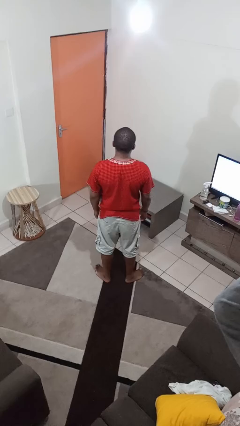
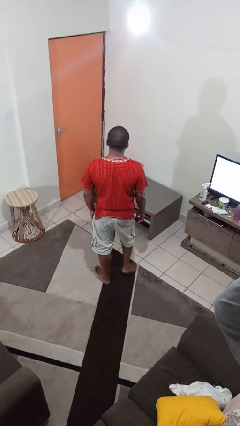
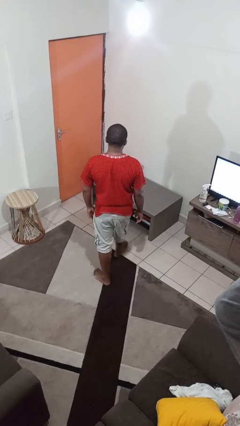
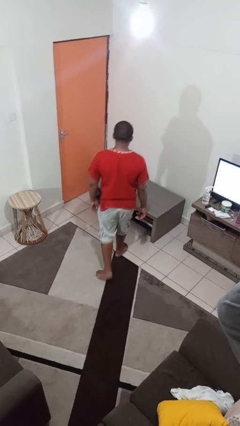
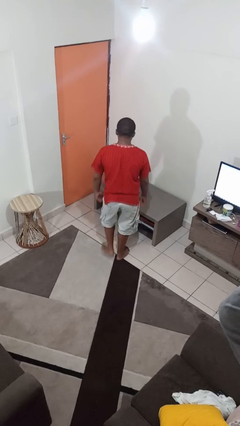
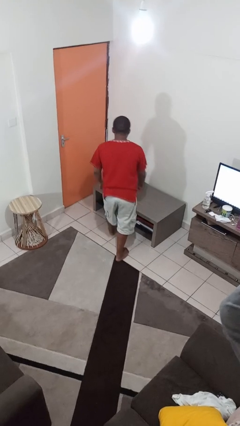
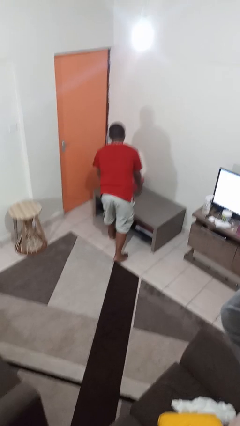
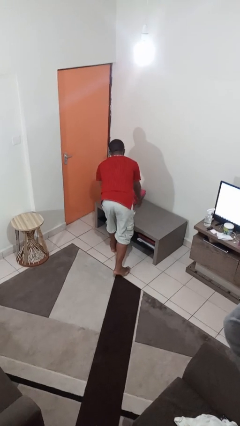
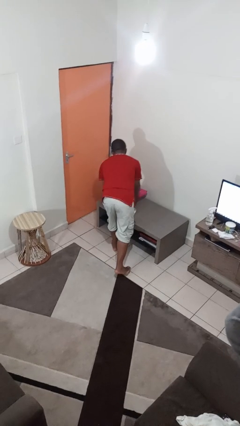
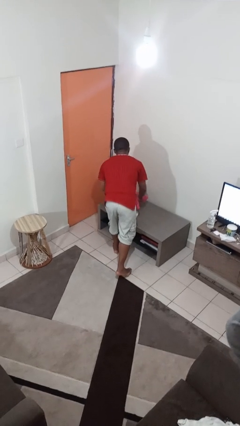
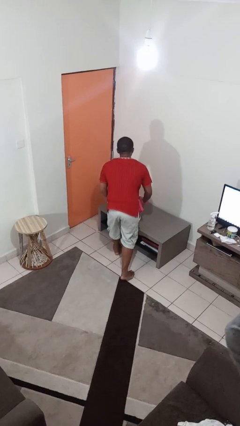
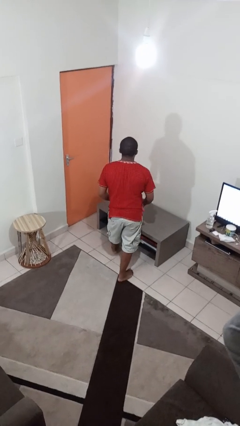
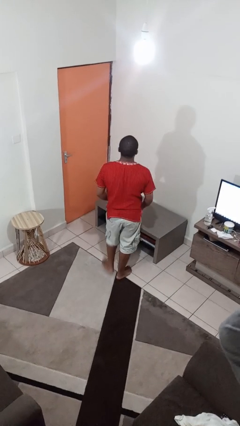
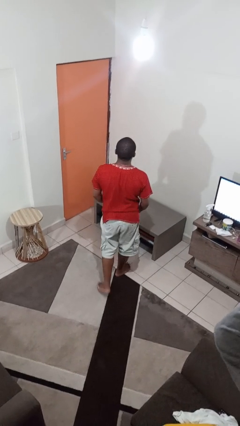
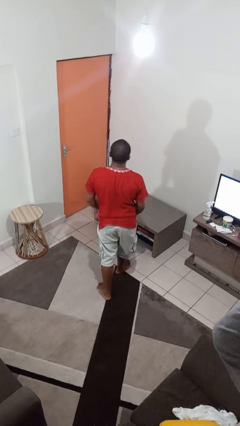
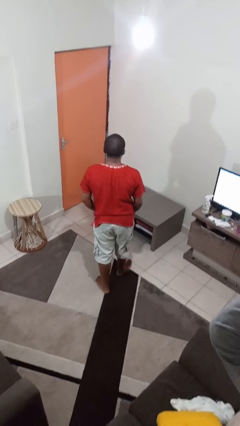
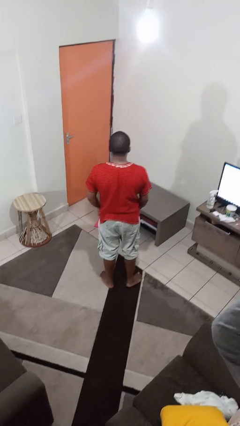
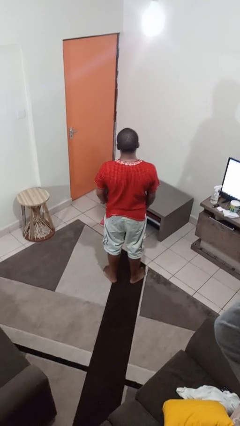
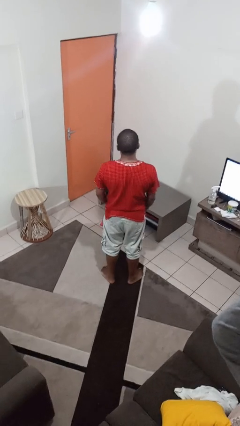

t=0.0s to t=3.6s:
person picks up object from table

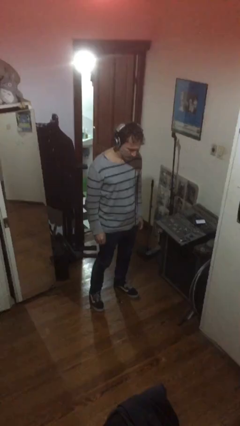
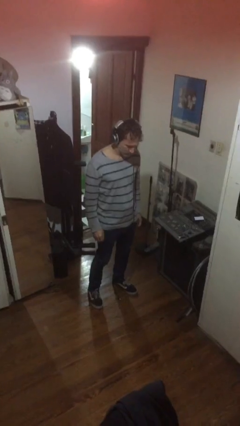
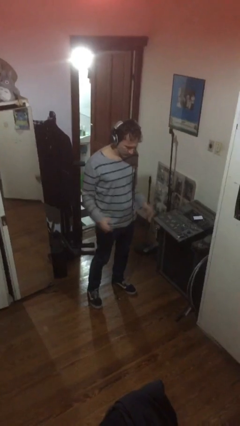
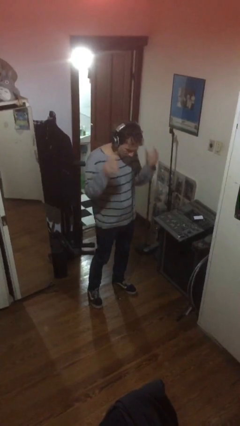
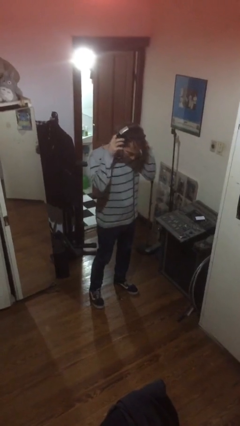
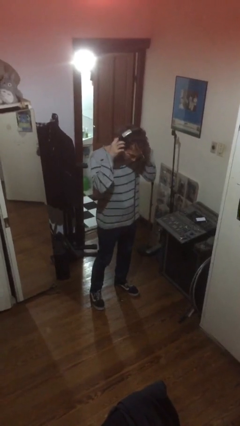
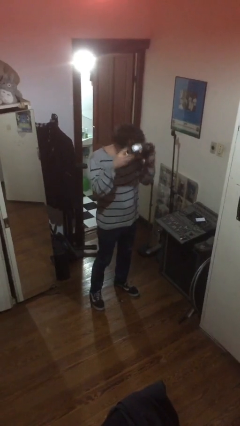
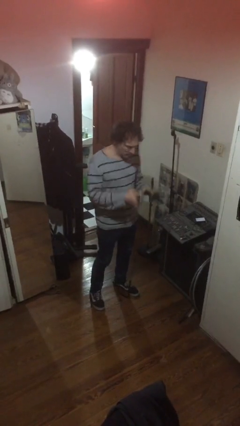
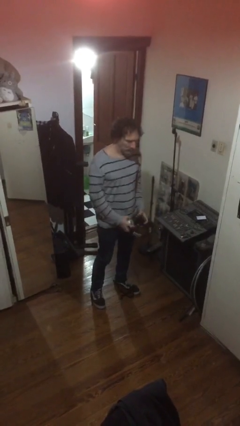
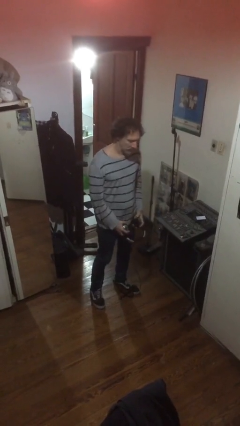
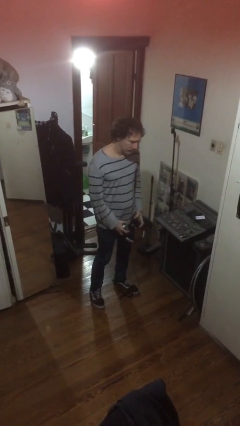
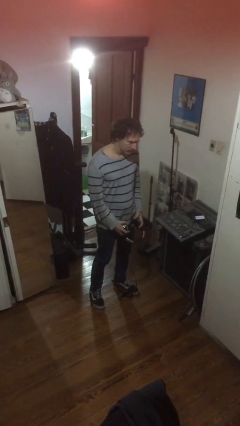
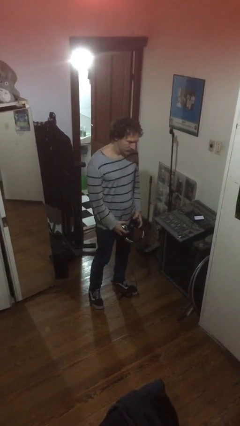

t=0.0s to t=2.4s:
person takes off headphones

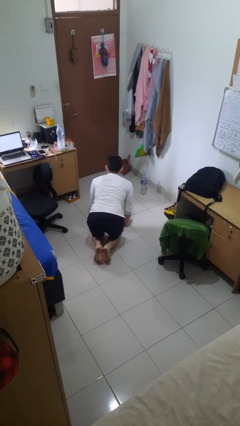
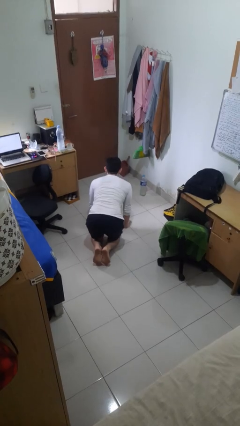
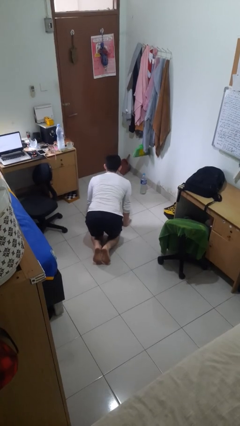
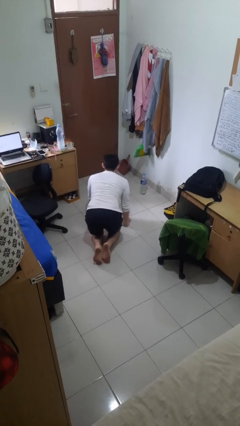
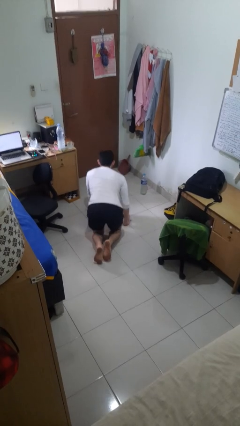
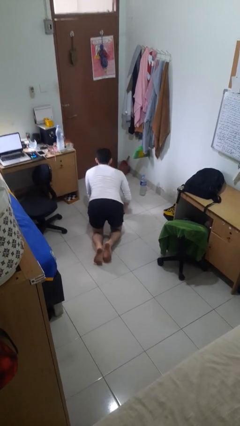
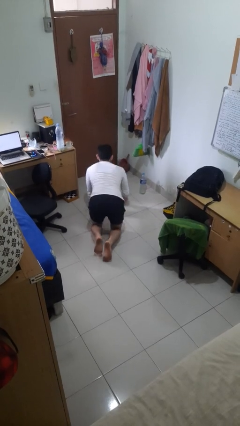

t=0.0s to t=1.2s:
person crawls

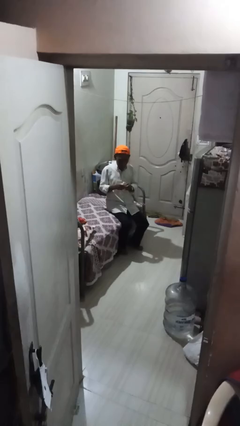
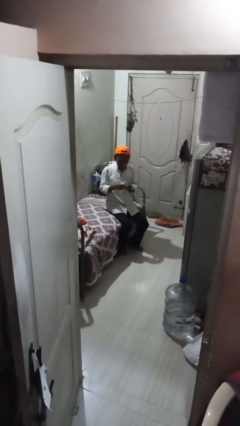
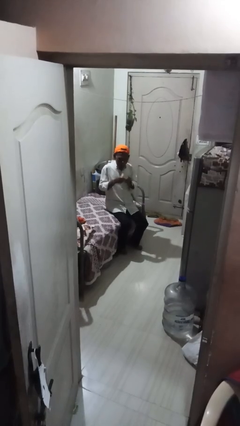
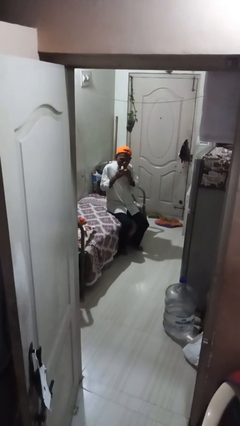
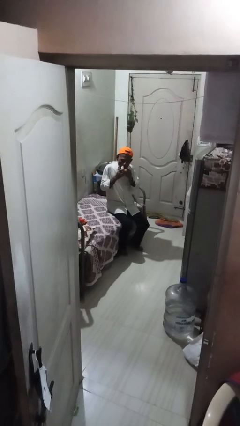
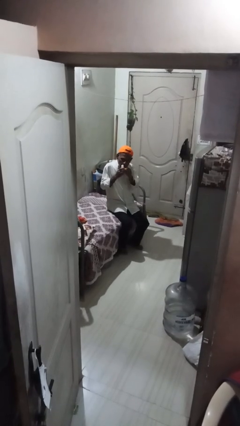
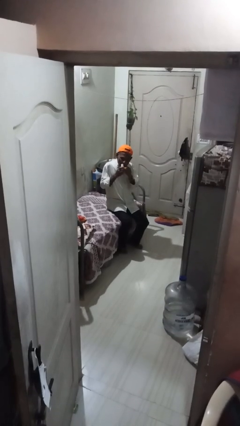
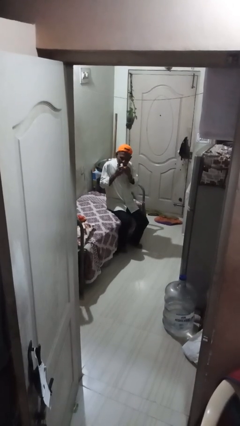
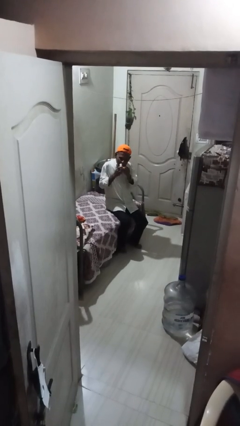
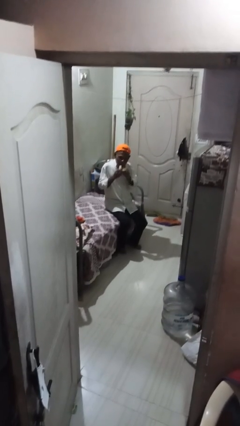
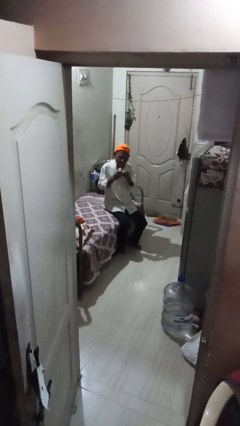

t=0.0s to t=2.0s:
person eats banana

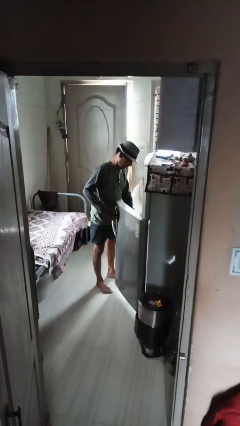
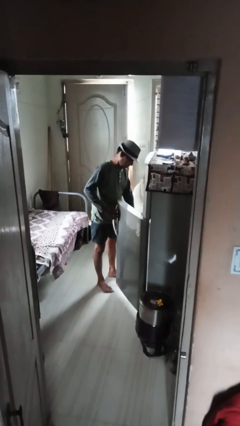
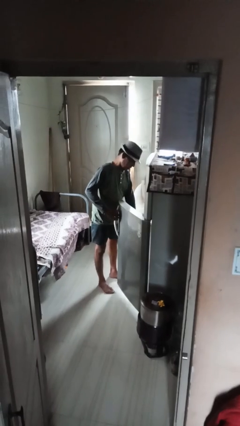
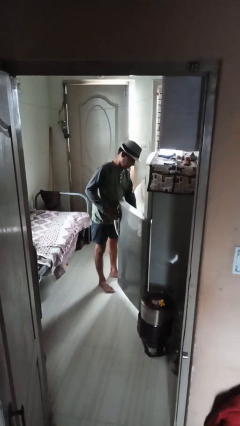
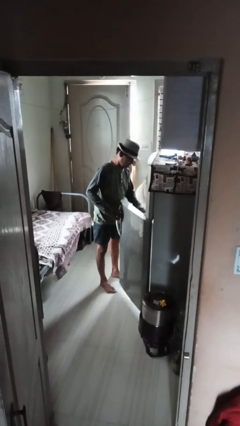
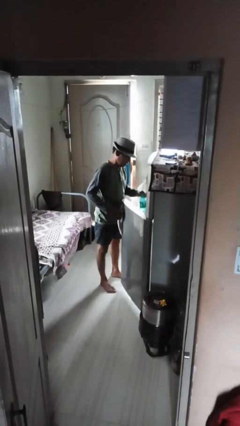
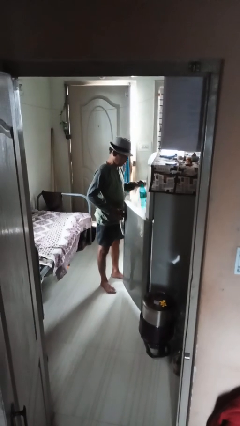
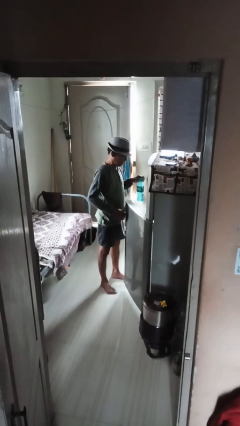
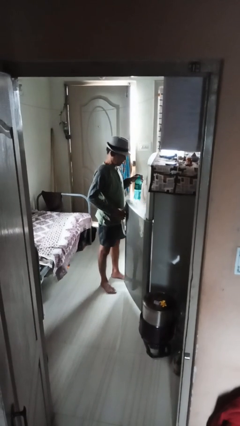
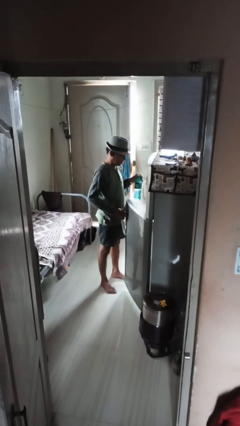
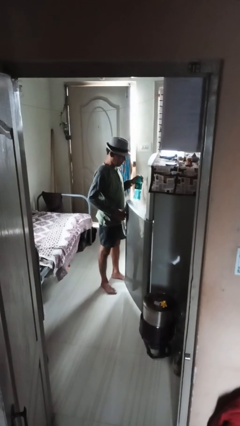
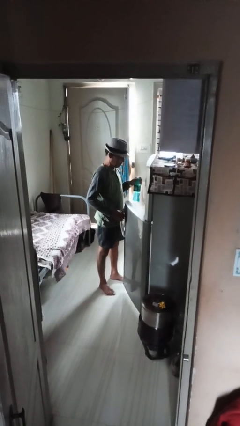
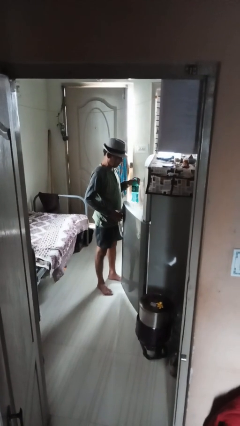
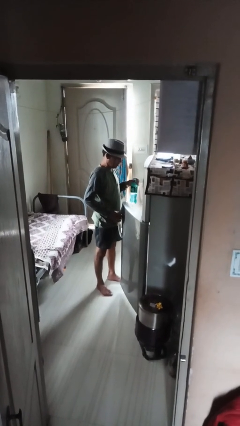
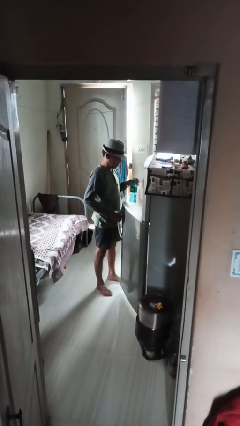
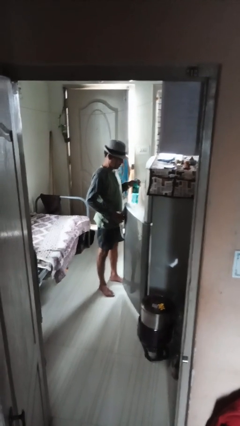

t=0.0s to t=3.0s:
person takes object from refrigerator

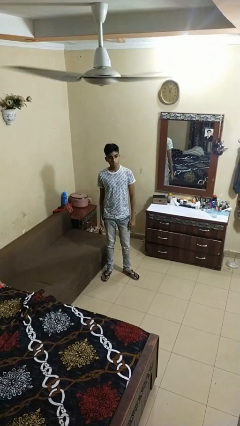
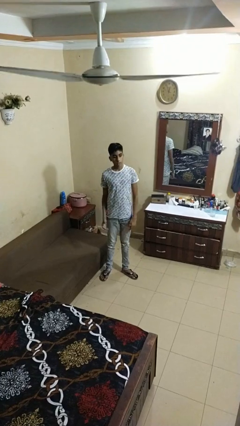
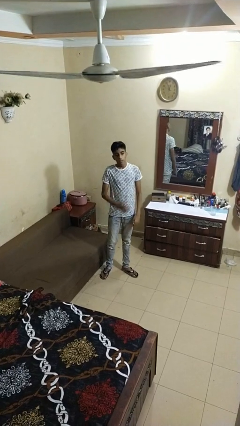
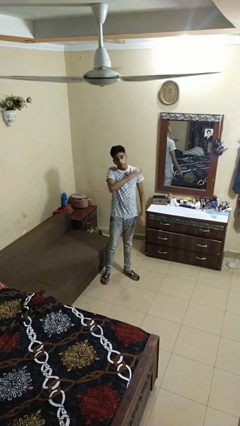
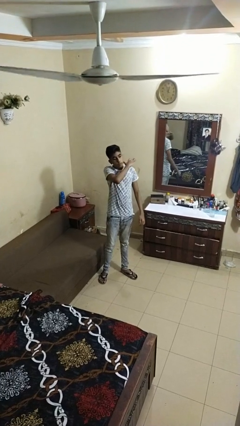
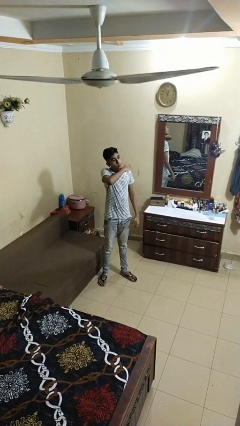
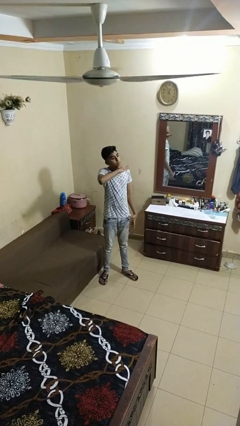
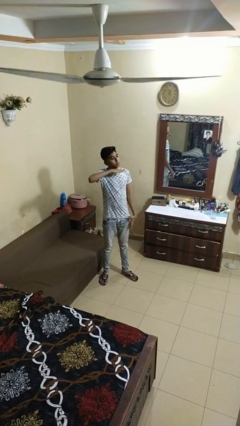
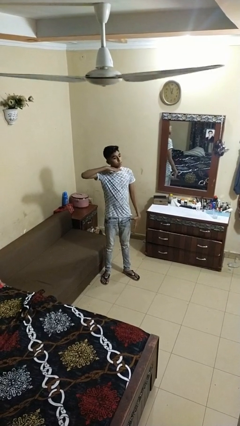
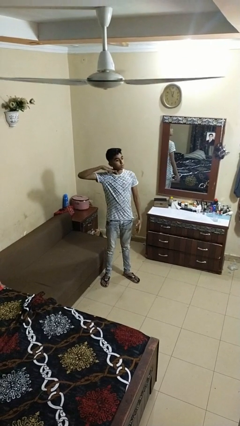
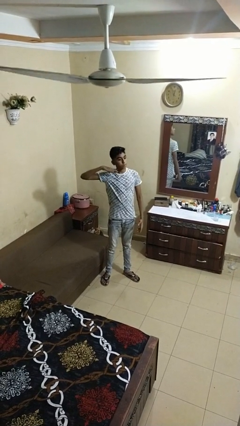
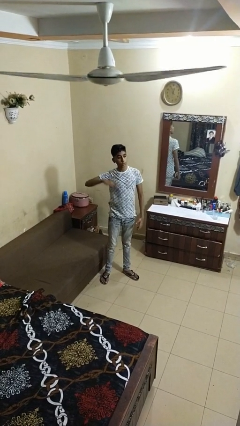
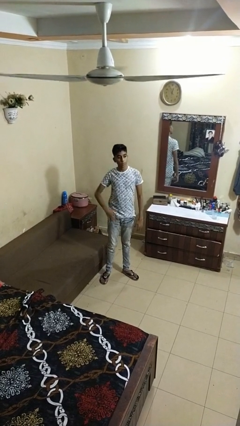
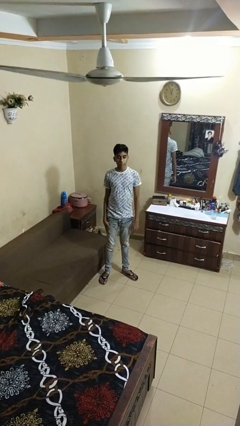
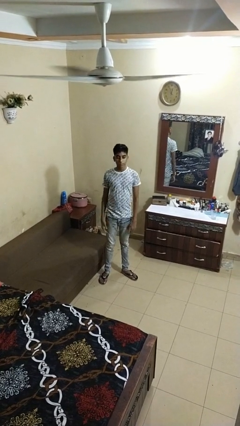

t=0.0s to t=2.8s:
person gestures cut

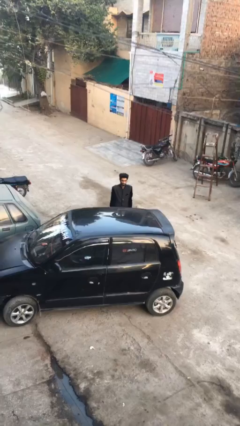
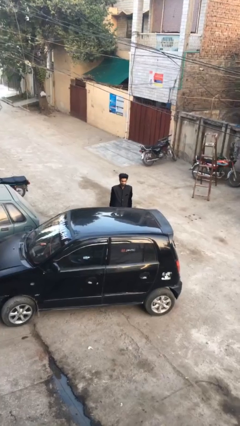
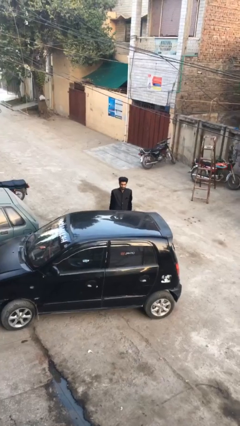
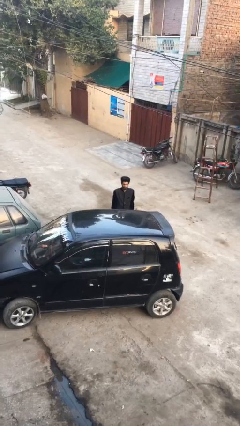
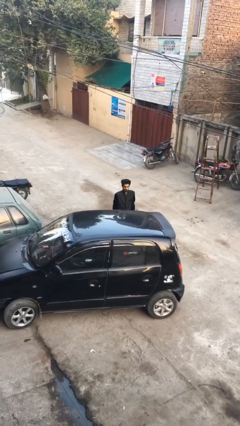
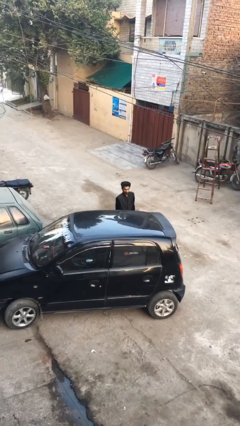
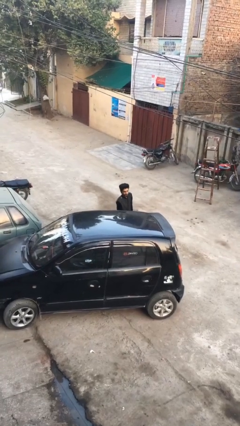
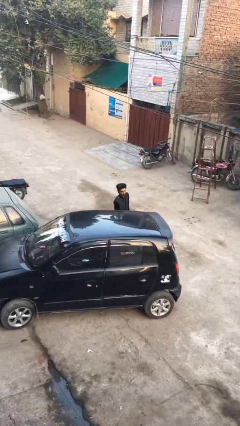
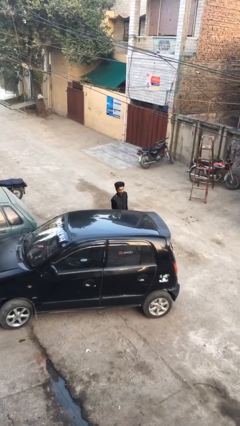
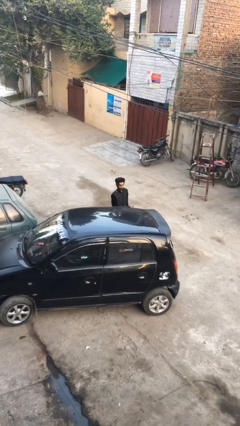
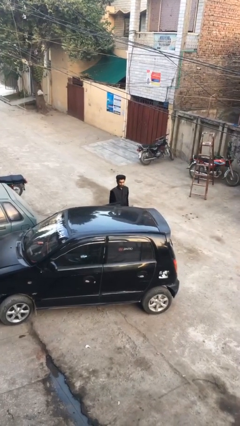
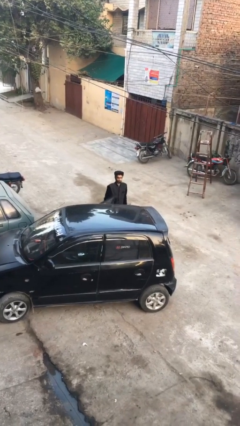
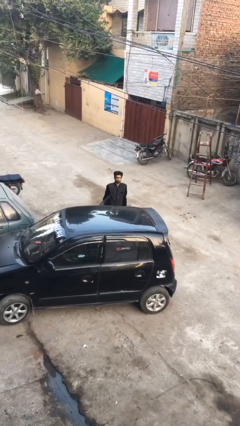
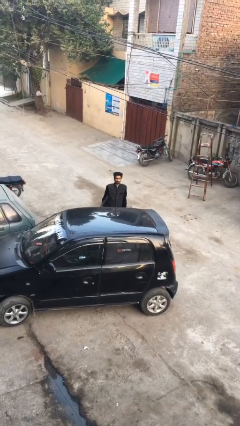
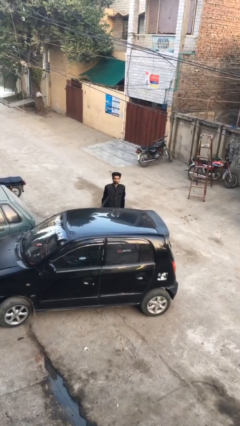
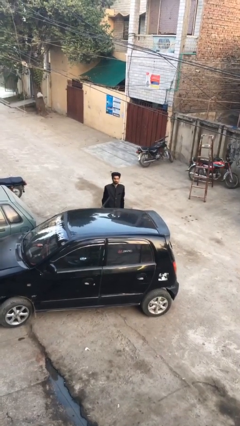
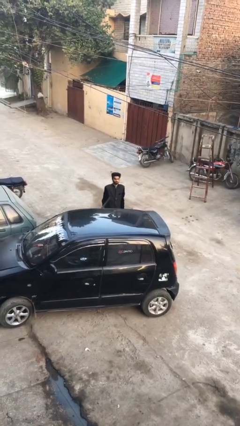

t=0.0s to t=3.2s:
person opens car door
